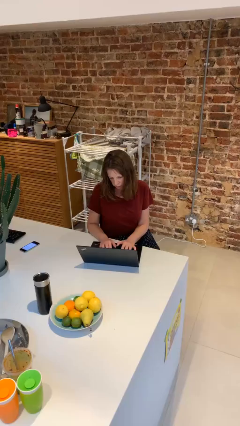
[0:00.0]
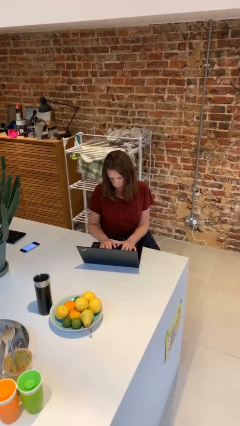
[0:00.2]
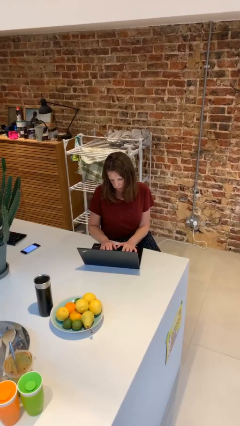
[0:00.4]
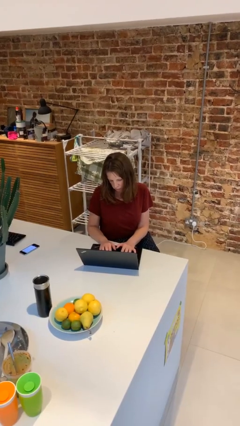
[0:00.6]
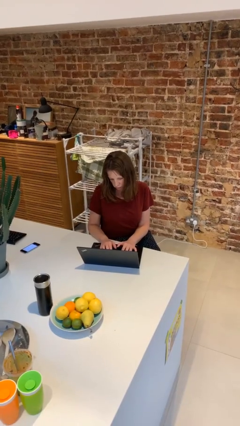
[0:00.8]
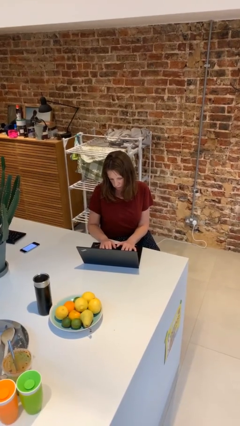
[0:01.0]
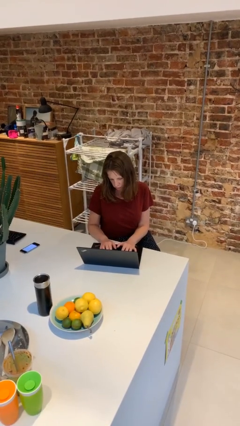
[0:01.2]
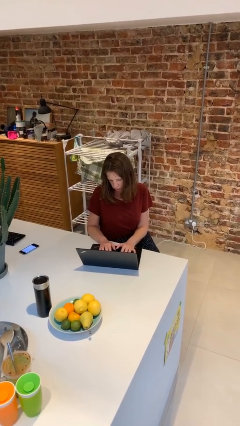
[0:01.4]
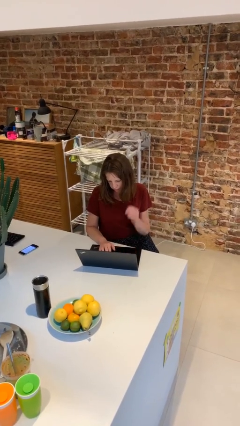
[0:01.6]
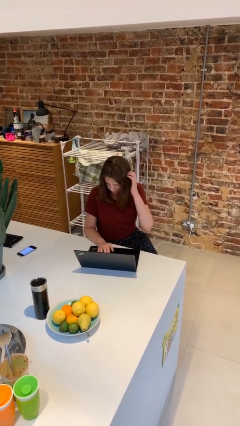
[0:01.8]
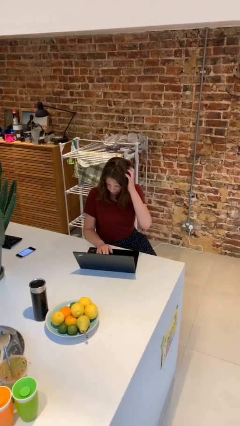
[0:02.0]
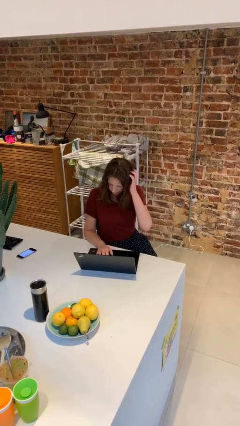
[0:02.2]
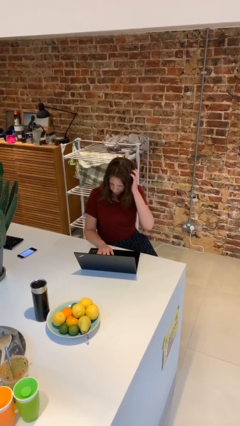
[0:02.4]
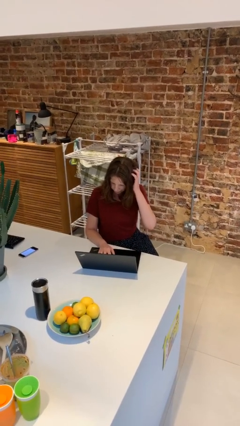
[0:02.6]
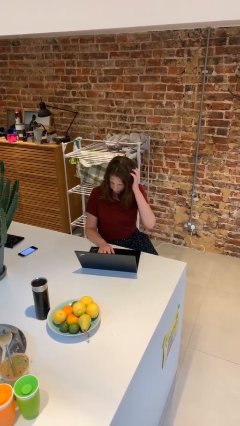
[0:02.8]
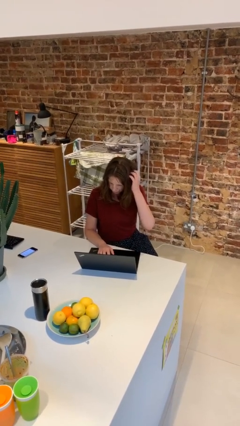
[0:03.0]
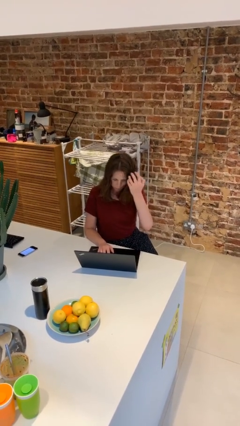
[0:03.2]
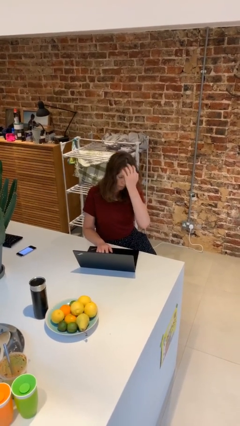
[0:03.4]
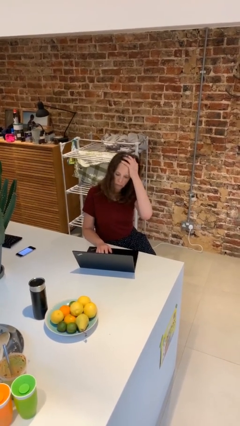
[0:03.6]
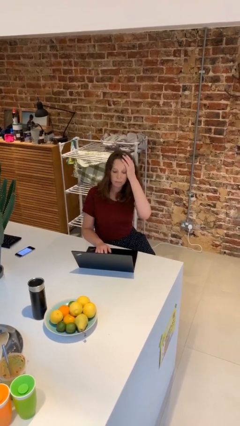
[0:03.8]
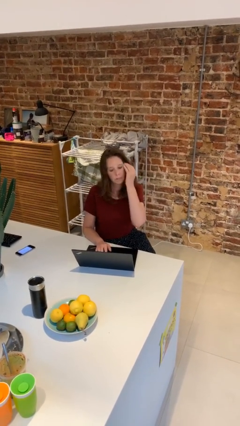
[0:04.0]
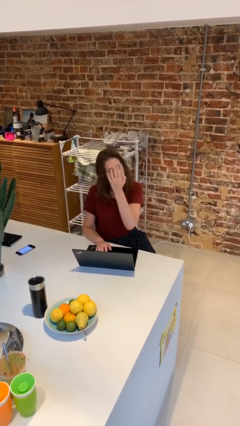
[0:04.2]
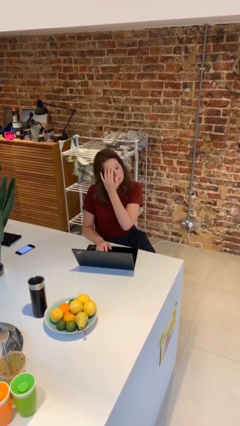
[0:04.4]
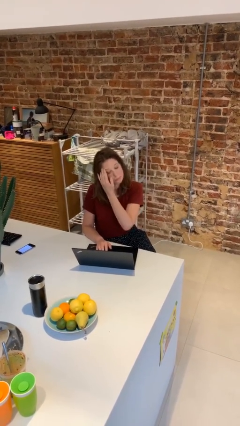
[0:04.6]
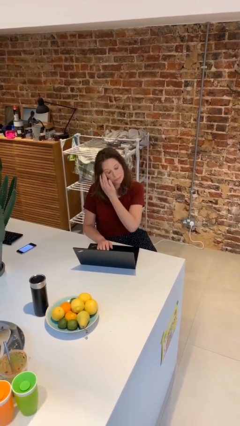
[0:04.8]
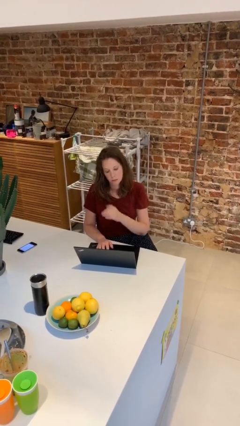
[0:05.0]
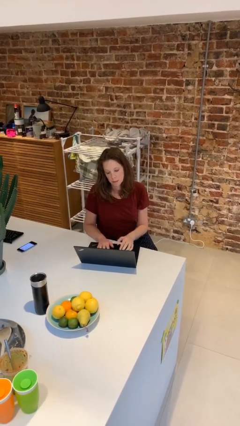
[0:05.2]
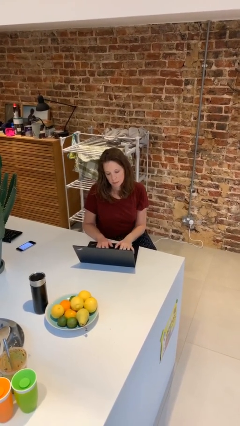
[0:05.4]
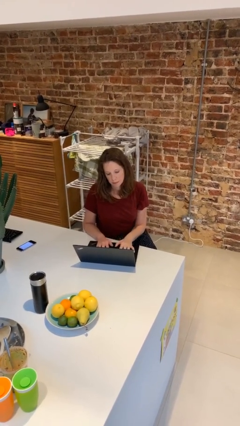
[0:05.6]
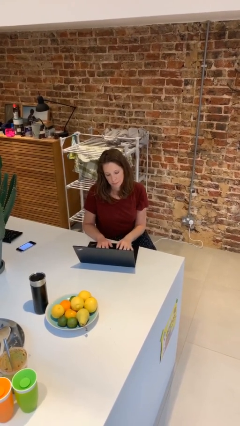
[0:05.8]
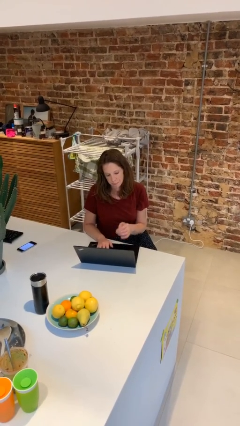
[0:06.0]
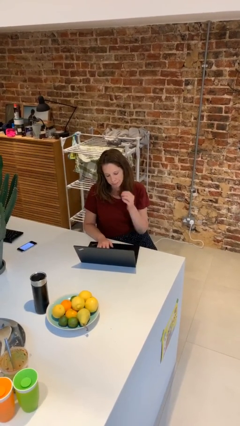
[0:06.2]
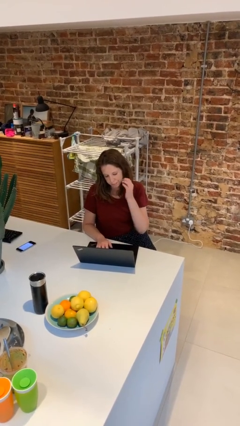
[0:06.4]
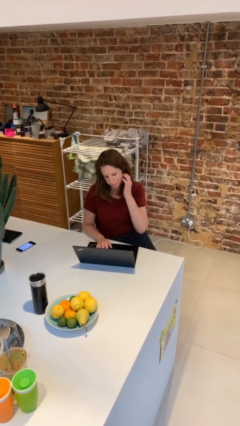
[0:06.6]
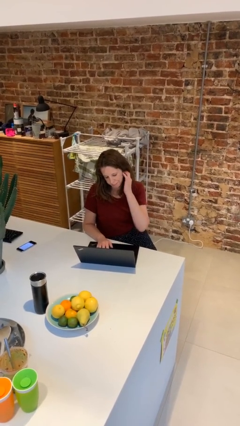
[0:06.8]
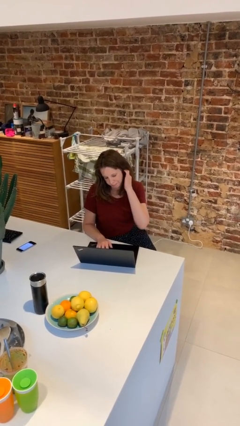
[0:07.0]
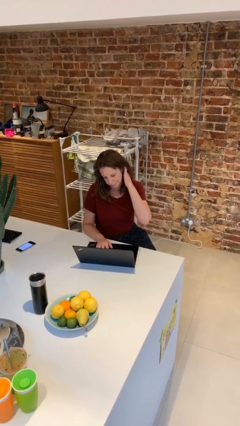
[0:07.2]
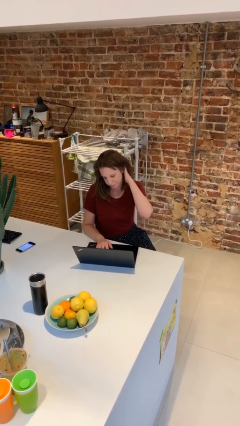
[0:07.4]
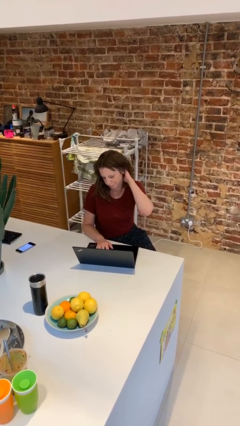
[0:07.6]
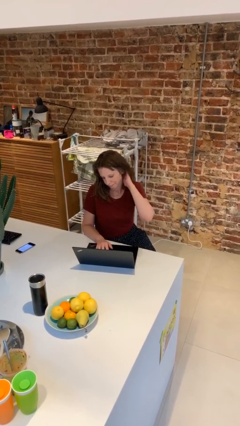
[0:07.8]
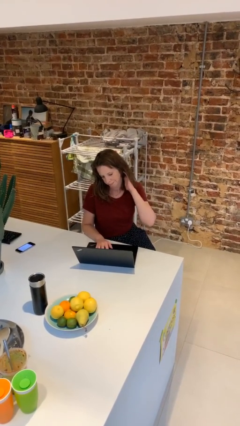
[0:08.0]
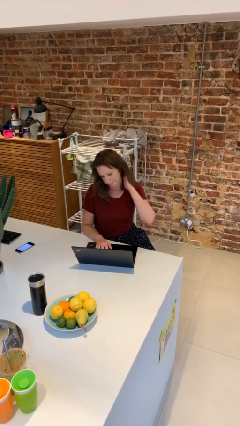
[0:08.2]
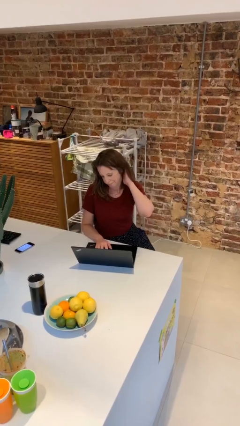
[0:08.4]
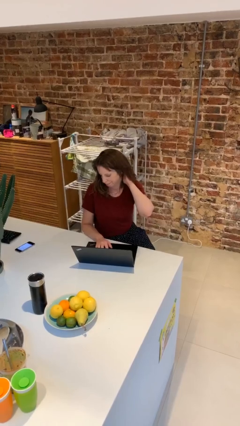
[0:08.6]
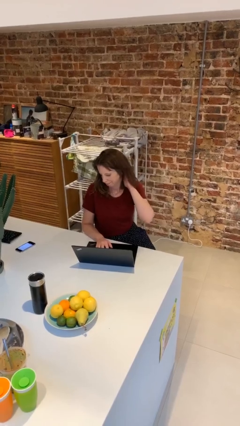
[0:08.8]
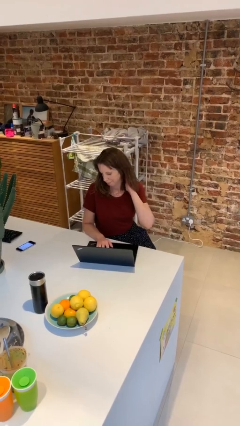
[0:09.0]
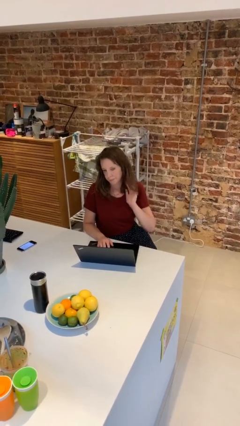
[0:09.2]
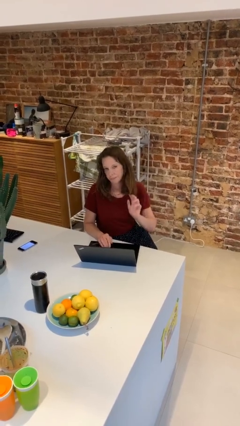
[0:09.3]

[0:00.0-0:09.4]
person interacts with laptop

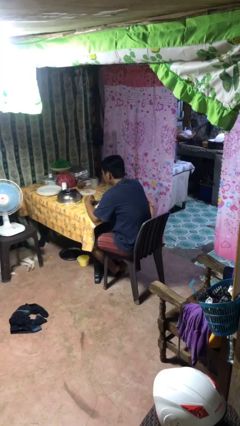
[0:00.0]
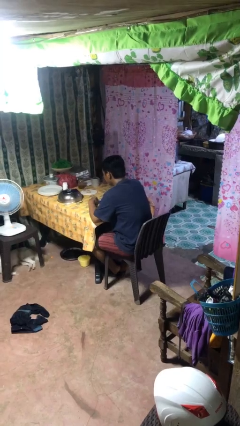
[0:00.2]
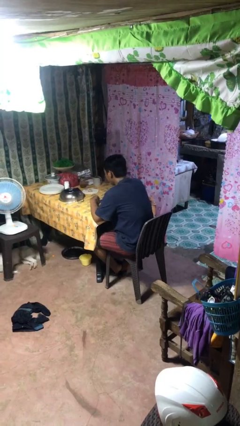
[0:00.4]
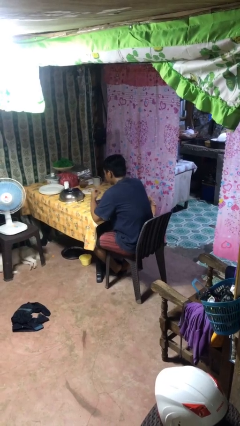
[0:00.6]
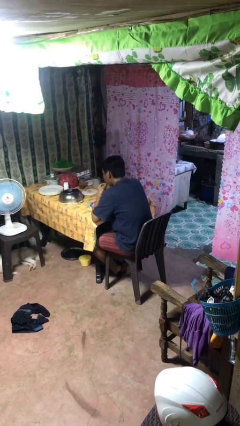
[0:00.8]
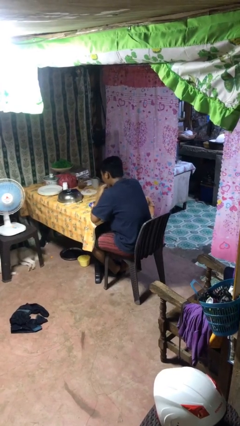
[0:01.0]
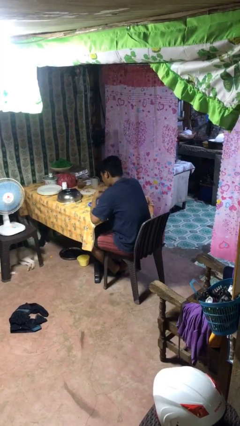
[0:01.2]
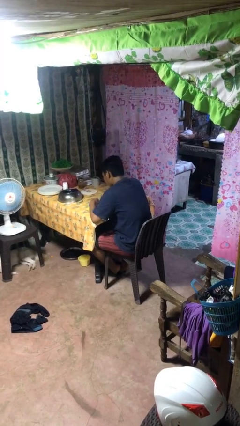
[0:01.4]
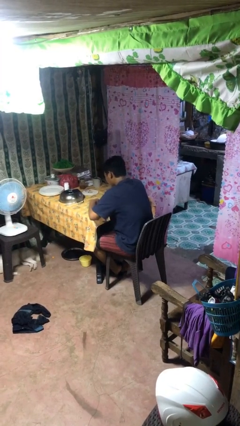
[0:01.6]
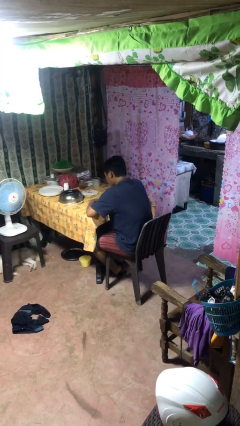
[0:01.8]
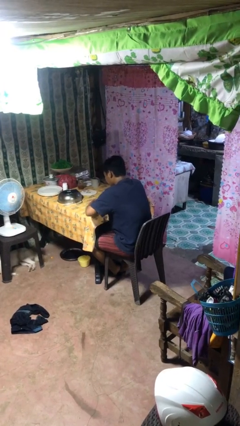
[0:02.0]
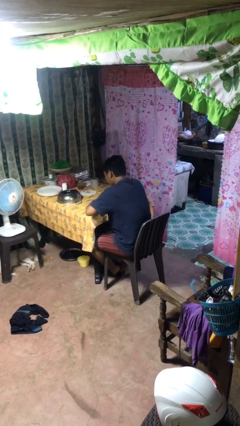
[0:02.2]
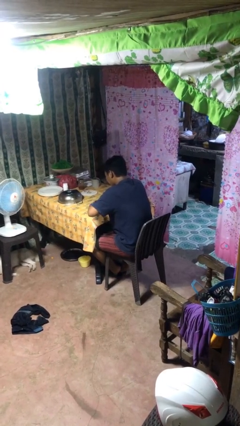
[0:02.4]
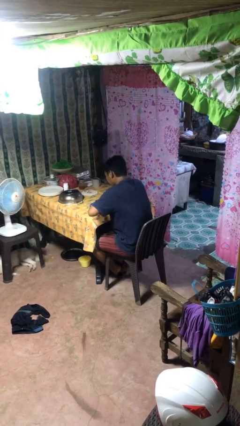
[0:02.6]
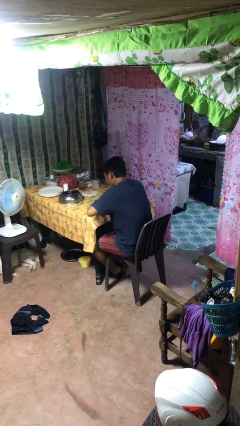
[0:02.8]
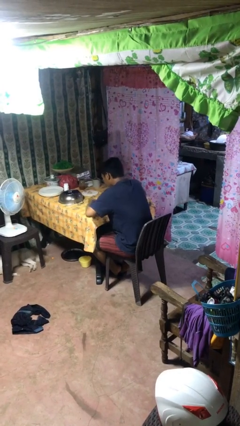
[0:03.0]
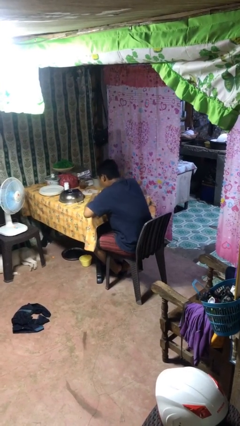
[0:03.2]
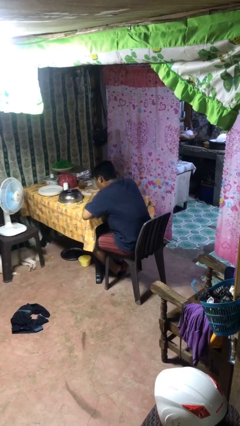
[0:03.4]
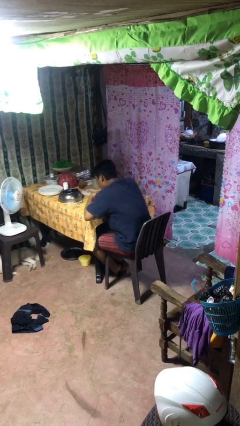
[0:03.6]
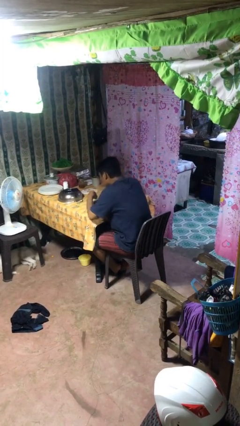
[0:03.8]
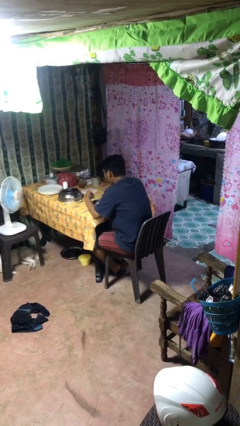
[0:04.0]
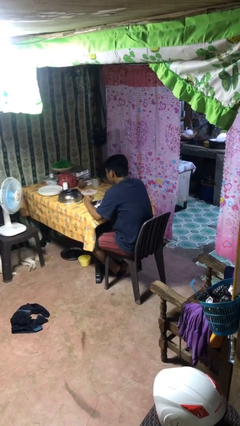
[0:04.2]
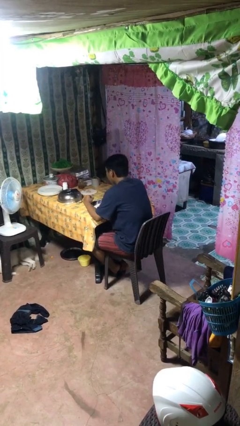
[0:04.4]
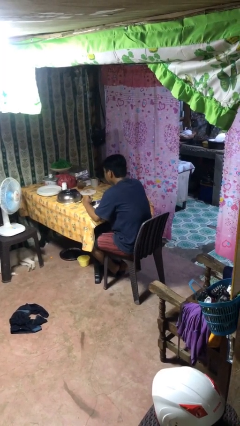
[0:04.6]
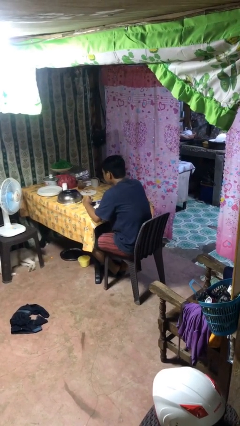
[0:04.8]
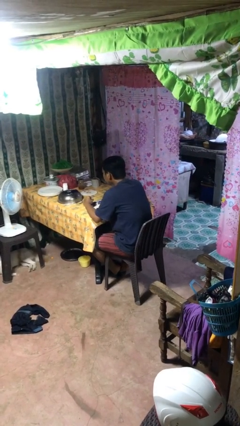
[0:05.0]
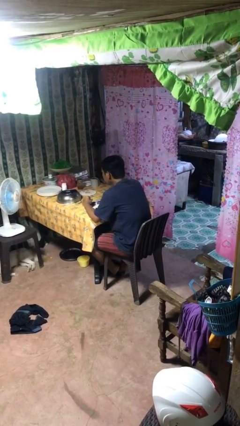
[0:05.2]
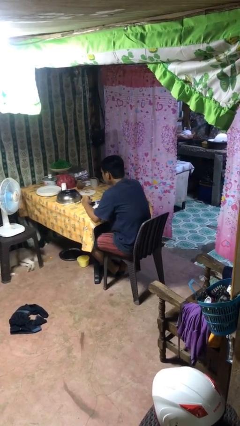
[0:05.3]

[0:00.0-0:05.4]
person eats with hands

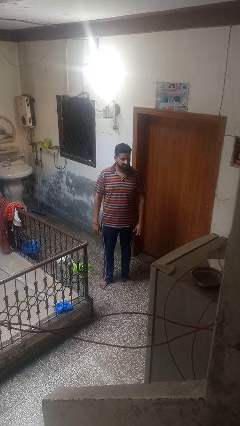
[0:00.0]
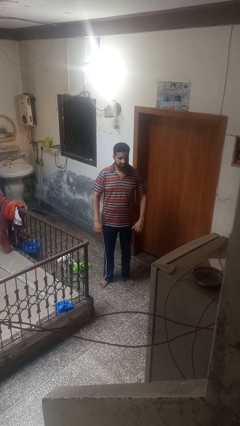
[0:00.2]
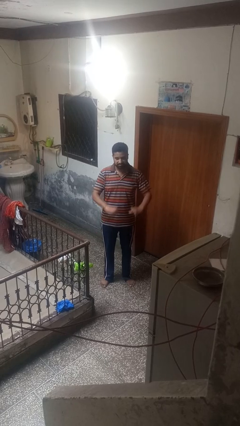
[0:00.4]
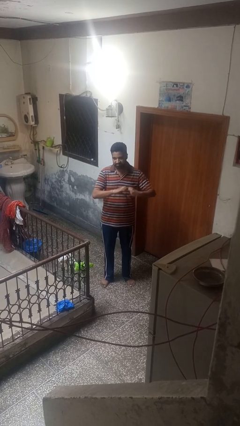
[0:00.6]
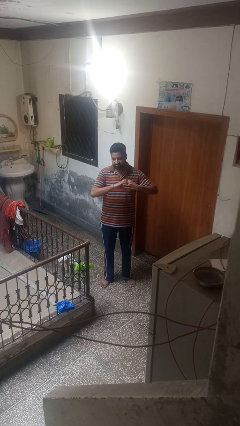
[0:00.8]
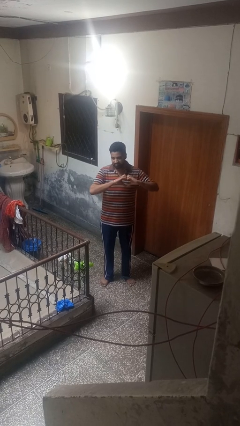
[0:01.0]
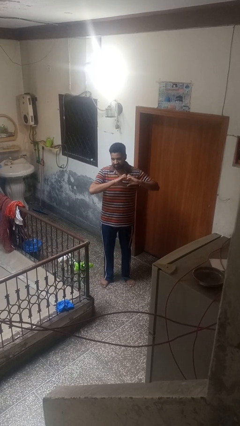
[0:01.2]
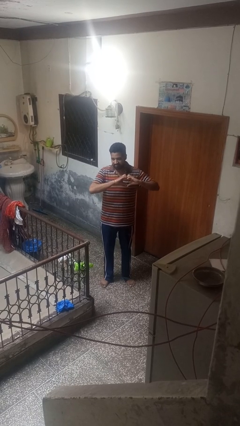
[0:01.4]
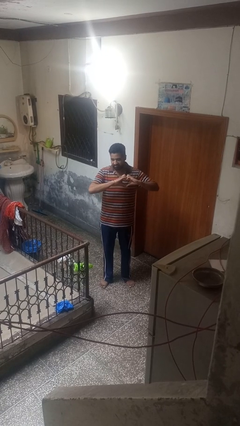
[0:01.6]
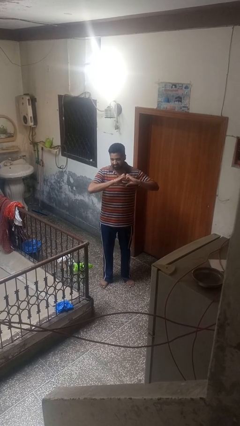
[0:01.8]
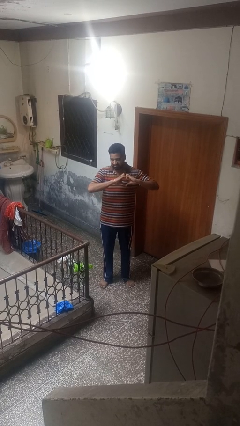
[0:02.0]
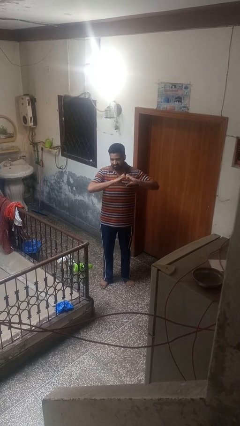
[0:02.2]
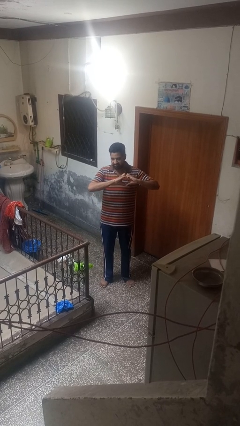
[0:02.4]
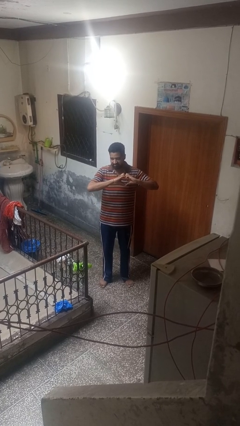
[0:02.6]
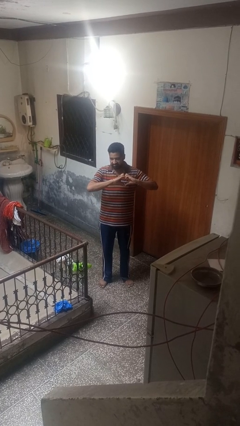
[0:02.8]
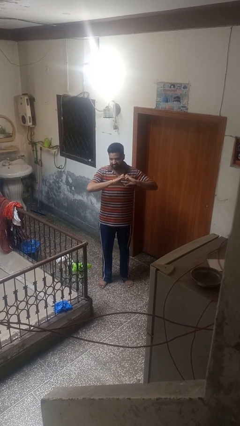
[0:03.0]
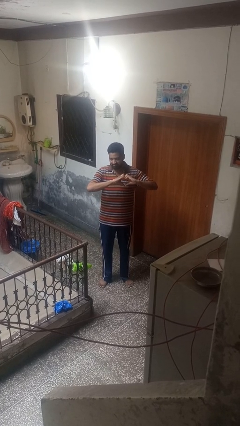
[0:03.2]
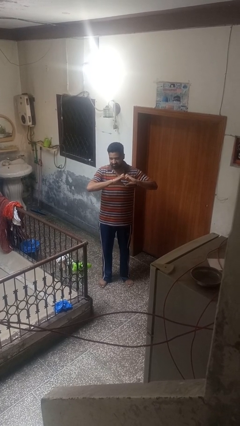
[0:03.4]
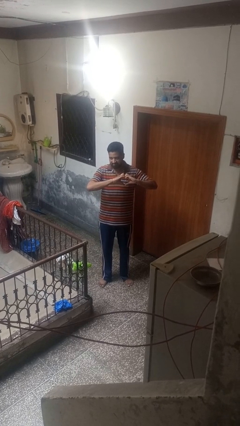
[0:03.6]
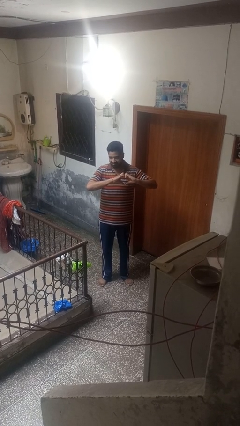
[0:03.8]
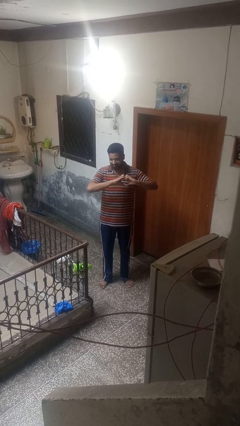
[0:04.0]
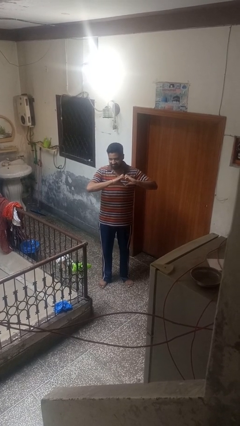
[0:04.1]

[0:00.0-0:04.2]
person gestures heart
